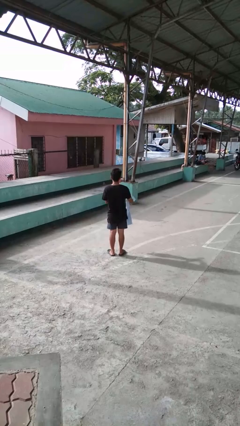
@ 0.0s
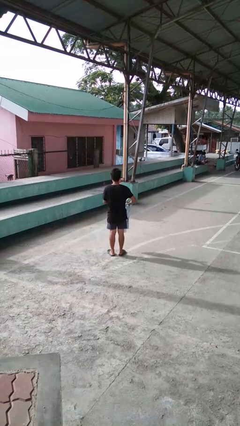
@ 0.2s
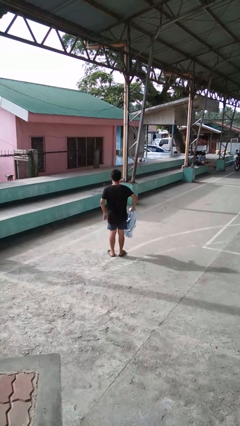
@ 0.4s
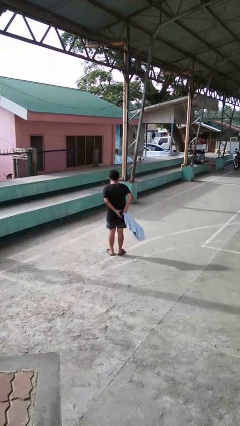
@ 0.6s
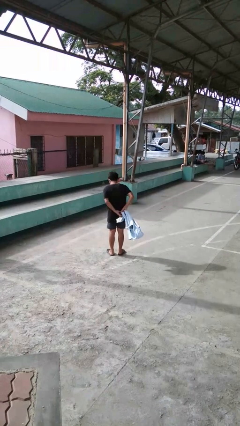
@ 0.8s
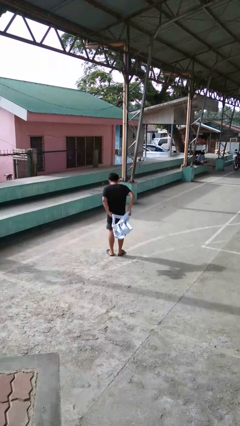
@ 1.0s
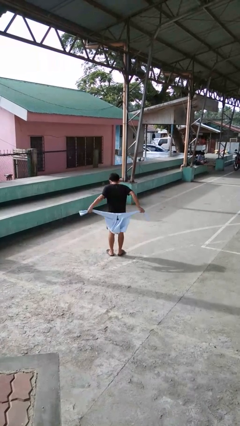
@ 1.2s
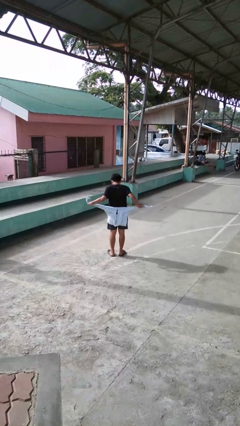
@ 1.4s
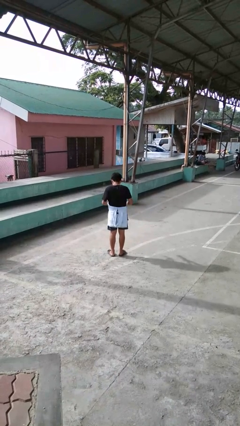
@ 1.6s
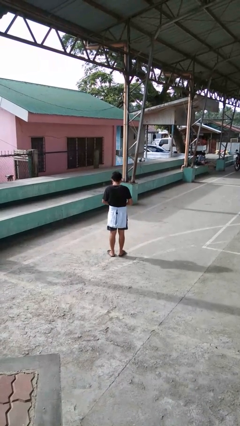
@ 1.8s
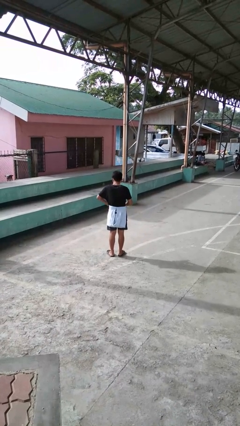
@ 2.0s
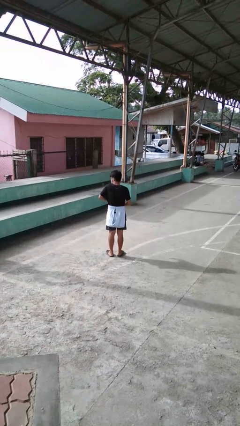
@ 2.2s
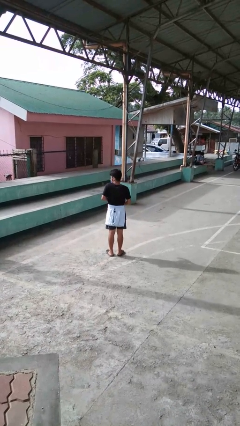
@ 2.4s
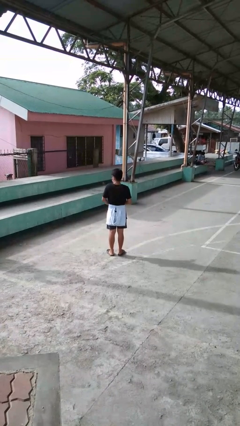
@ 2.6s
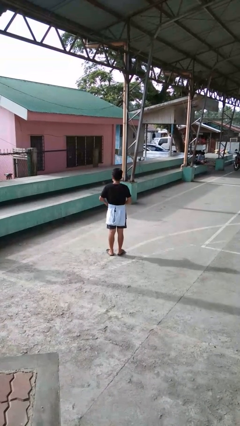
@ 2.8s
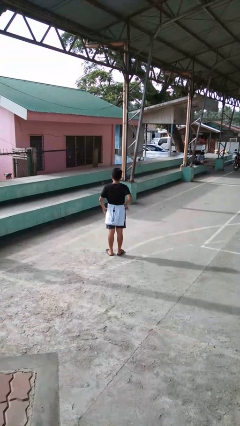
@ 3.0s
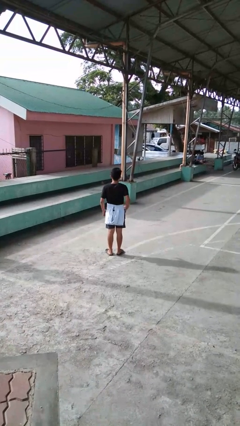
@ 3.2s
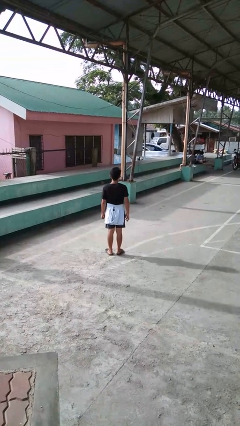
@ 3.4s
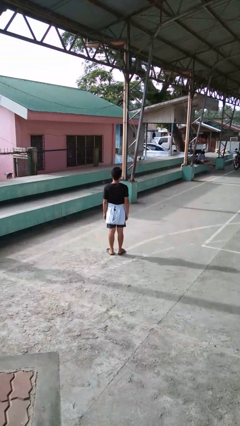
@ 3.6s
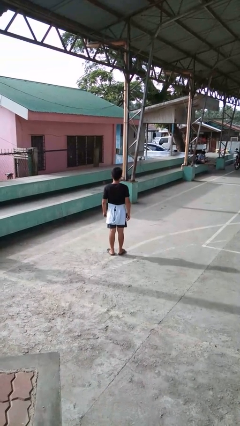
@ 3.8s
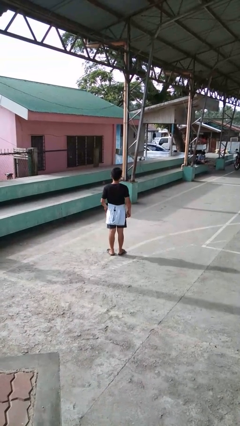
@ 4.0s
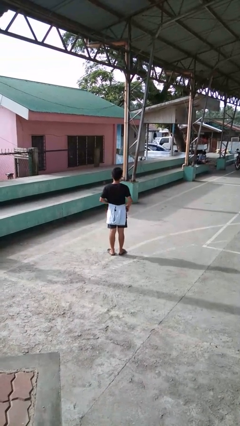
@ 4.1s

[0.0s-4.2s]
person ties jacket around waist

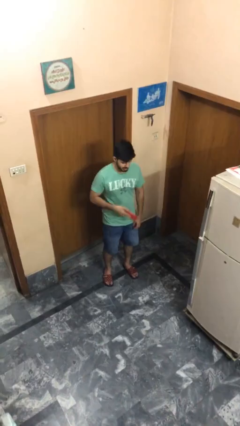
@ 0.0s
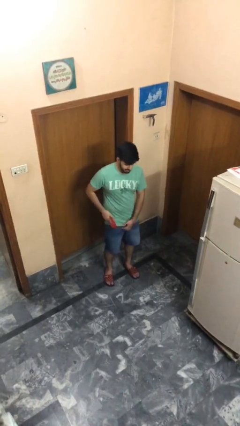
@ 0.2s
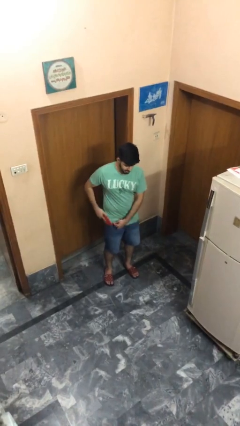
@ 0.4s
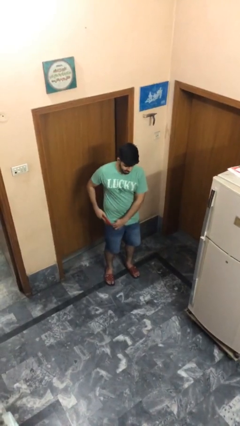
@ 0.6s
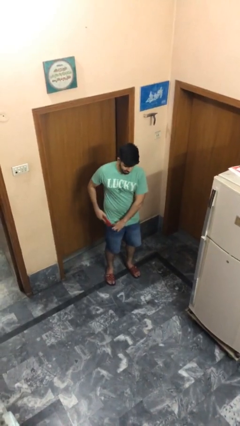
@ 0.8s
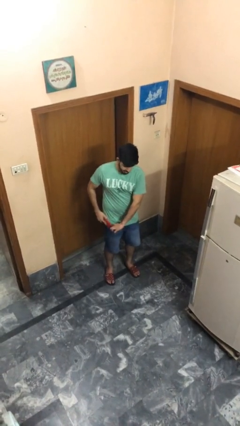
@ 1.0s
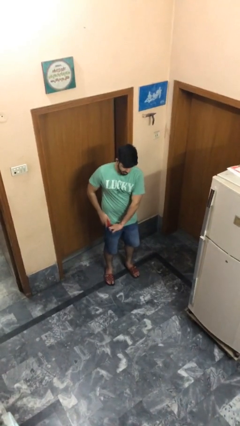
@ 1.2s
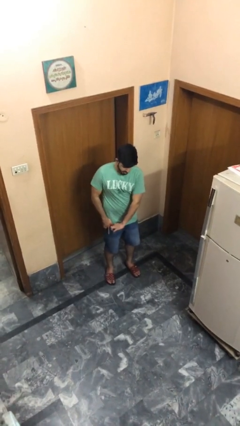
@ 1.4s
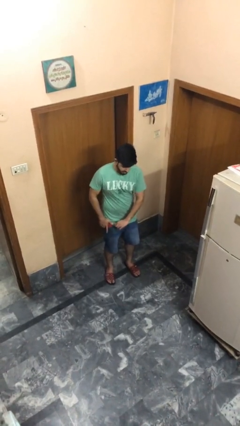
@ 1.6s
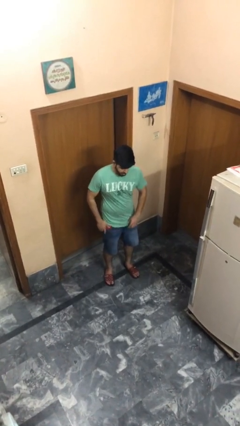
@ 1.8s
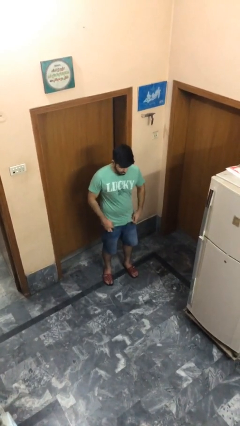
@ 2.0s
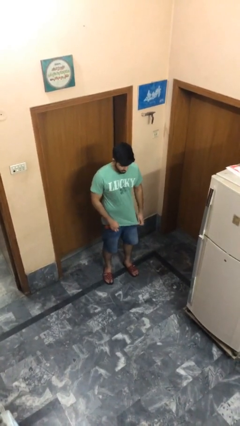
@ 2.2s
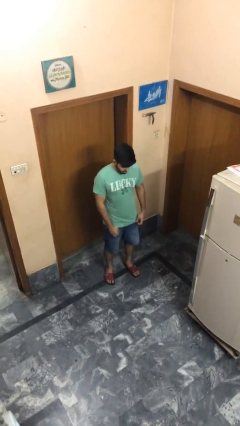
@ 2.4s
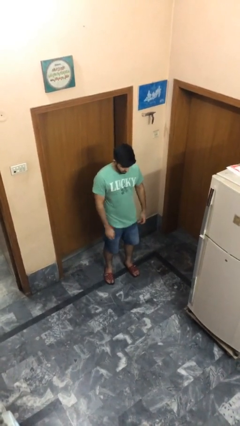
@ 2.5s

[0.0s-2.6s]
person puts phone into pocket

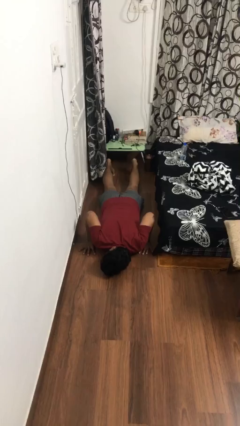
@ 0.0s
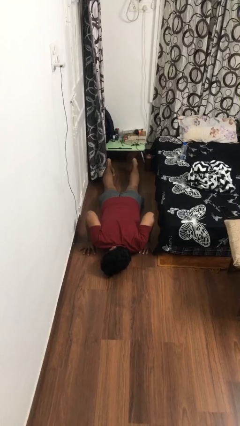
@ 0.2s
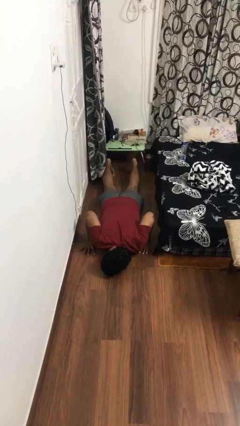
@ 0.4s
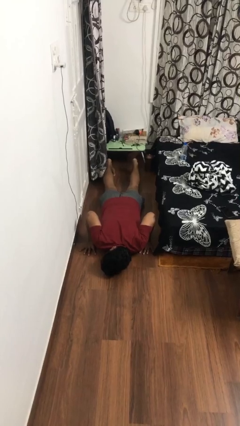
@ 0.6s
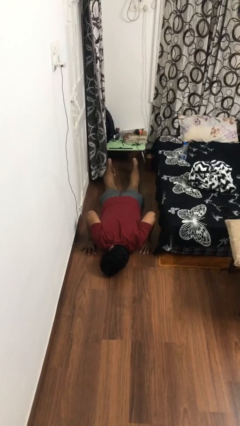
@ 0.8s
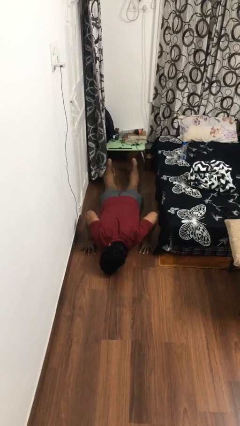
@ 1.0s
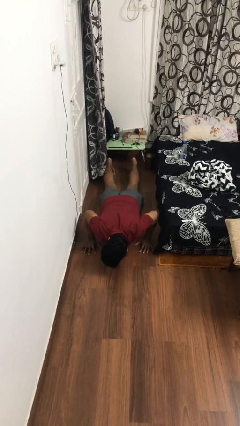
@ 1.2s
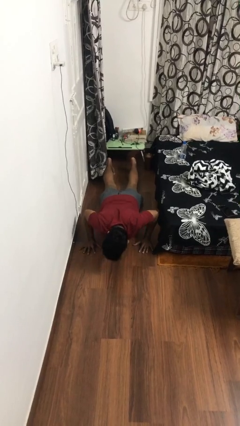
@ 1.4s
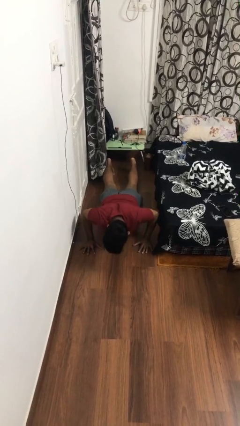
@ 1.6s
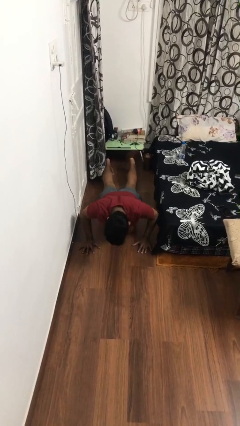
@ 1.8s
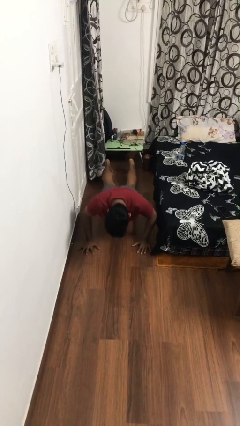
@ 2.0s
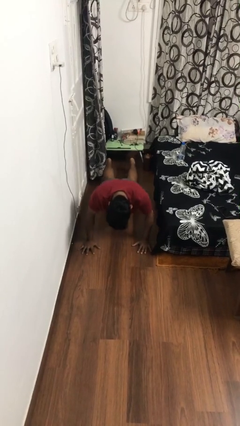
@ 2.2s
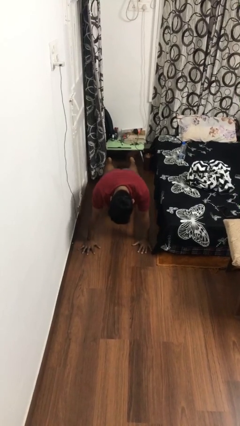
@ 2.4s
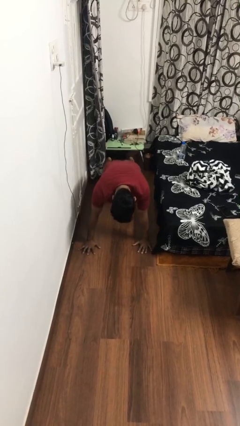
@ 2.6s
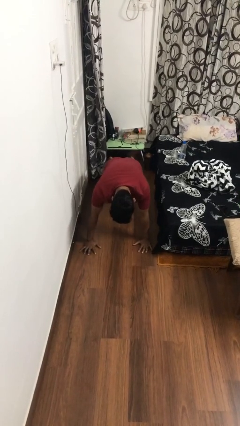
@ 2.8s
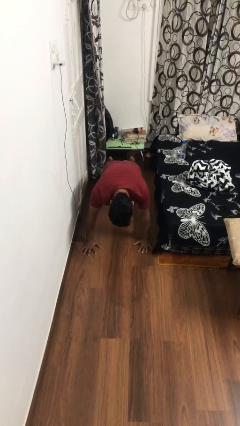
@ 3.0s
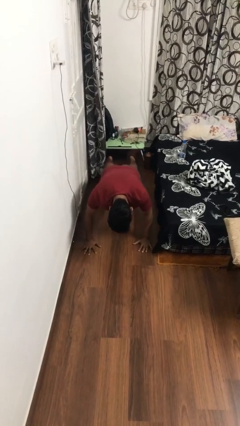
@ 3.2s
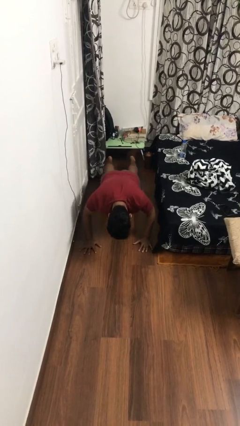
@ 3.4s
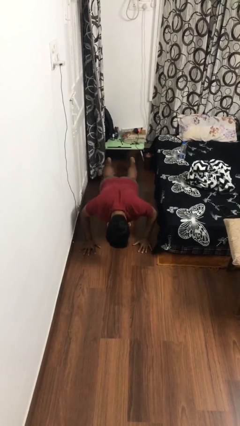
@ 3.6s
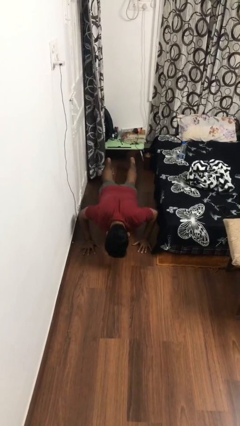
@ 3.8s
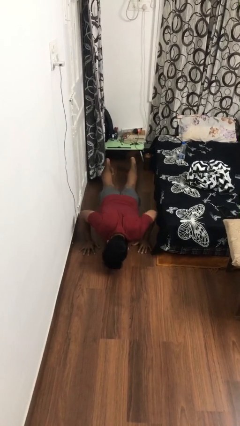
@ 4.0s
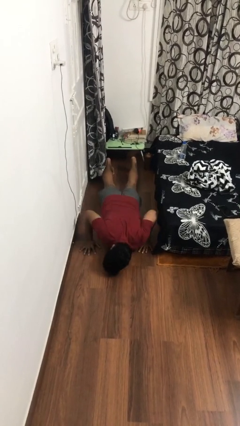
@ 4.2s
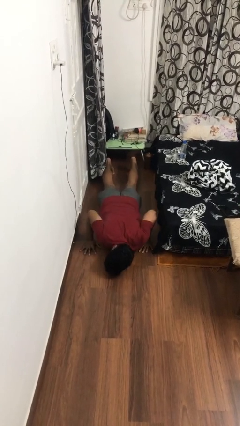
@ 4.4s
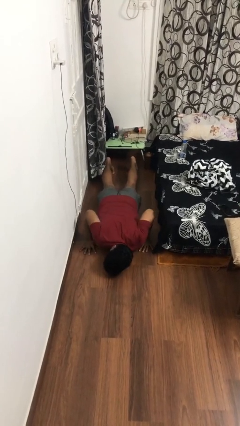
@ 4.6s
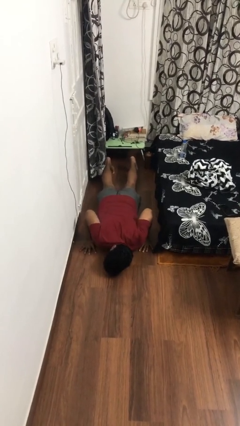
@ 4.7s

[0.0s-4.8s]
person exercises with pushup

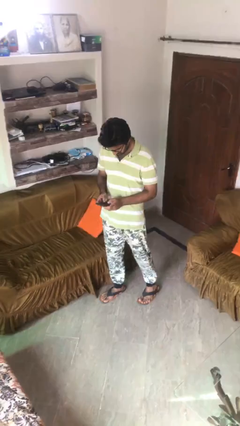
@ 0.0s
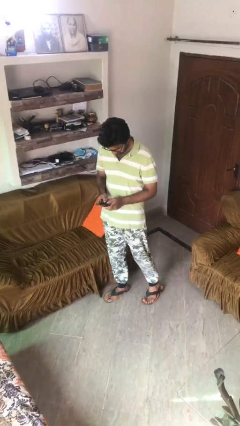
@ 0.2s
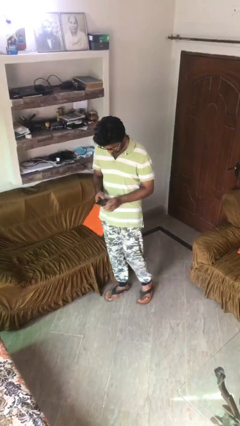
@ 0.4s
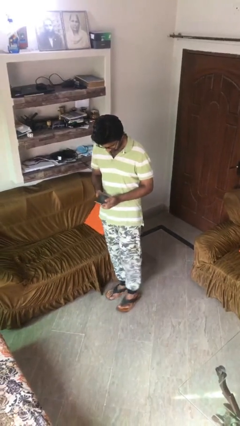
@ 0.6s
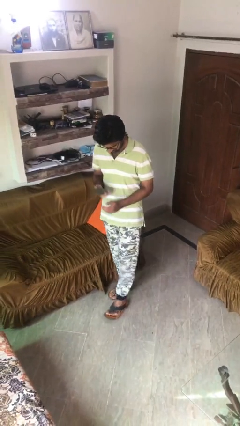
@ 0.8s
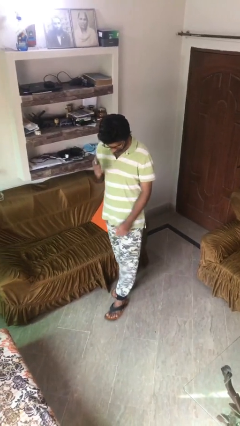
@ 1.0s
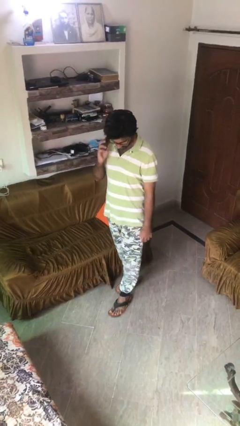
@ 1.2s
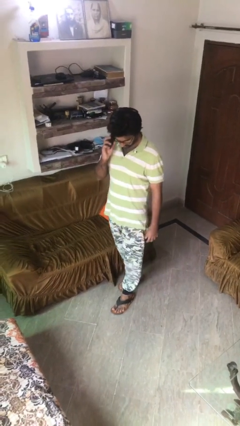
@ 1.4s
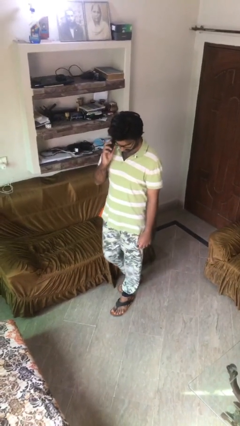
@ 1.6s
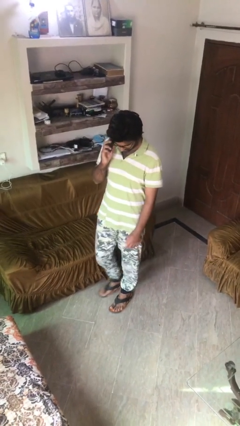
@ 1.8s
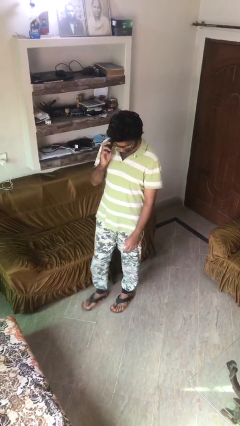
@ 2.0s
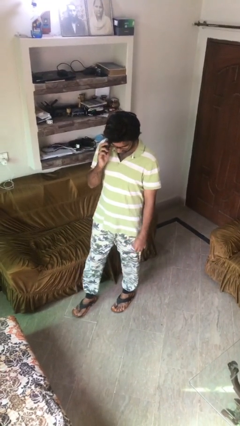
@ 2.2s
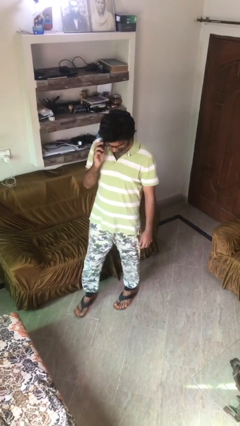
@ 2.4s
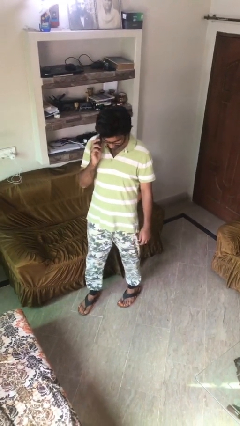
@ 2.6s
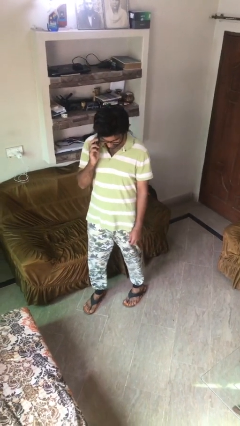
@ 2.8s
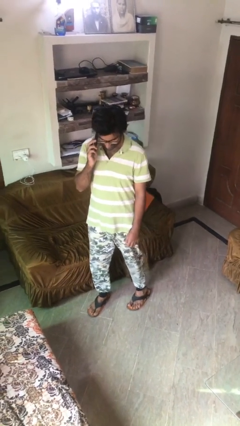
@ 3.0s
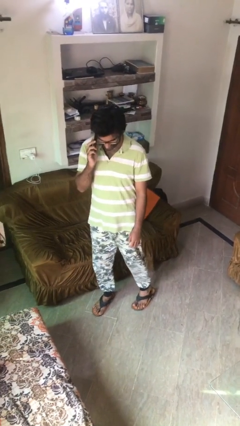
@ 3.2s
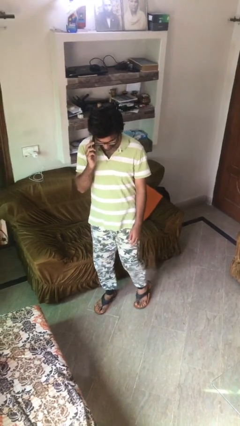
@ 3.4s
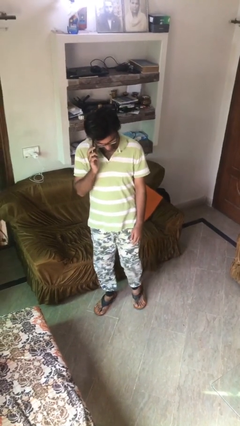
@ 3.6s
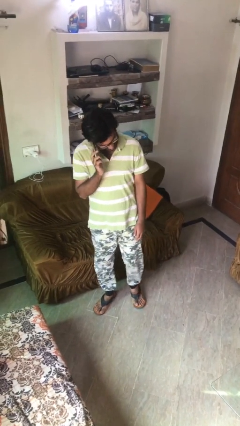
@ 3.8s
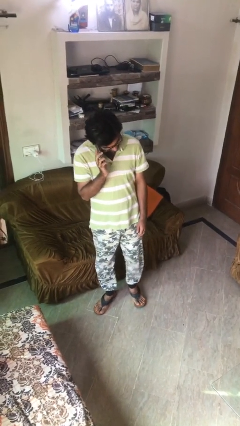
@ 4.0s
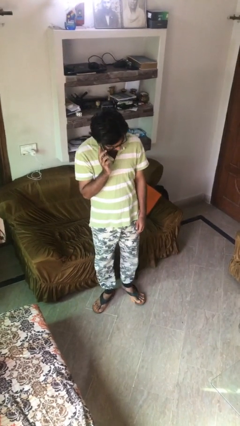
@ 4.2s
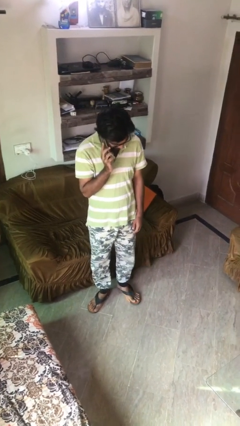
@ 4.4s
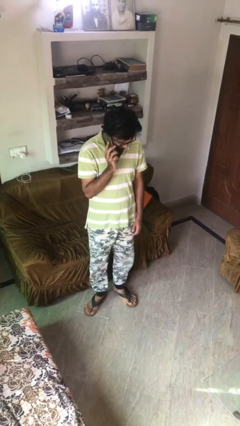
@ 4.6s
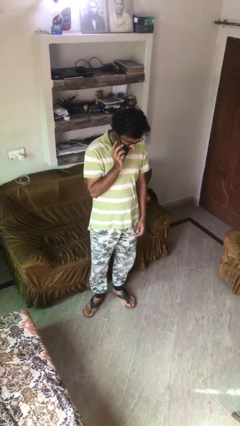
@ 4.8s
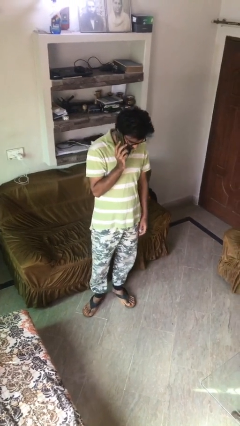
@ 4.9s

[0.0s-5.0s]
person talks on phone

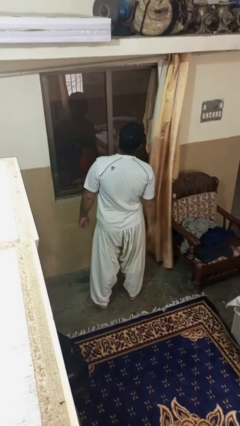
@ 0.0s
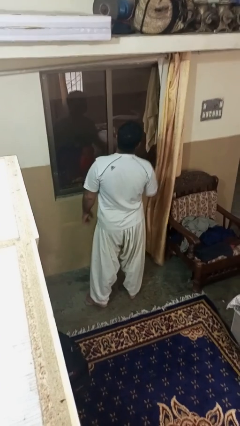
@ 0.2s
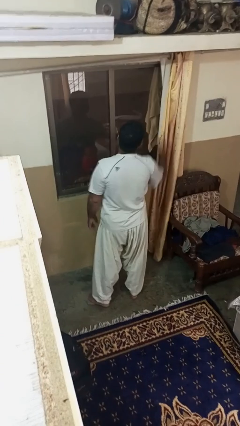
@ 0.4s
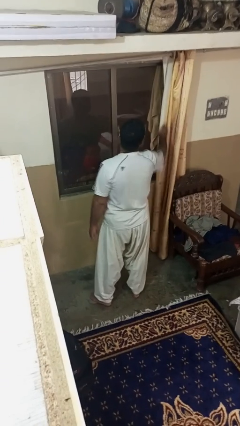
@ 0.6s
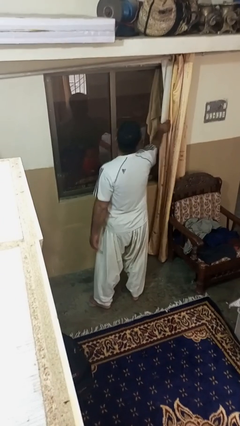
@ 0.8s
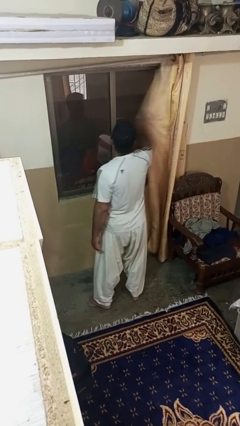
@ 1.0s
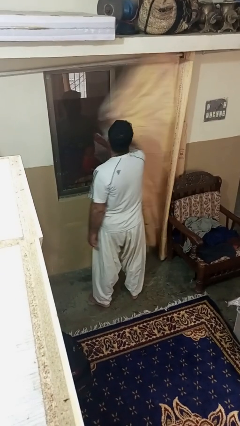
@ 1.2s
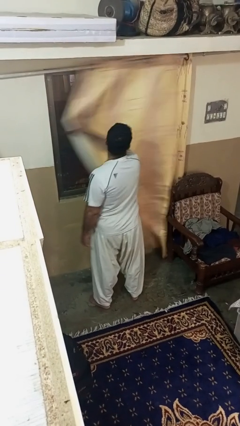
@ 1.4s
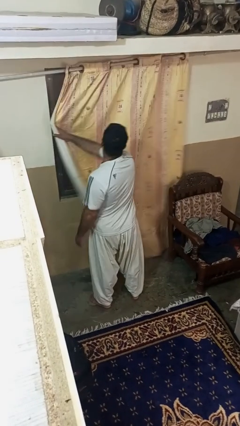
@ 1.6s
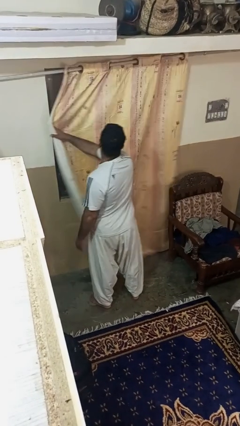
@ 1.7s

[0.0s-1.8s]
person closes curtains
